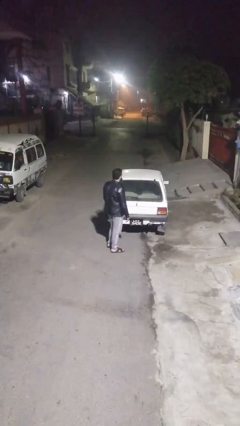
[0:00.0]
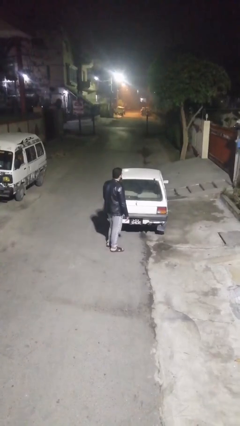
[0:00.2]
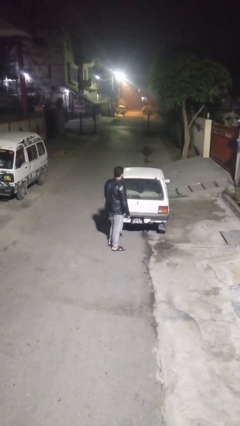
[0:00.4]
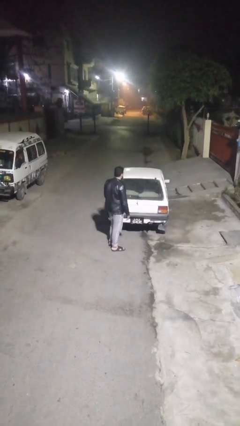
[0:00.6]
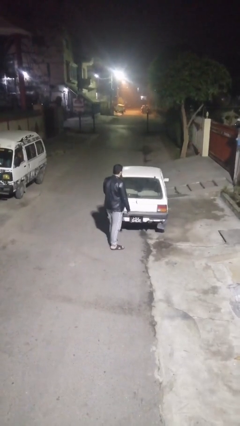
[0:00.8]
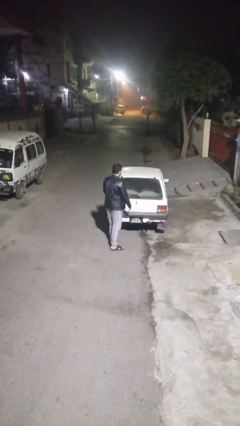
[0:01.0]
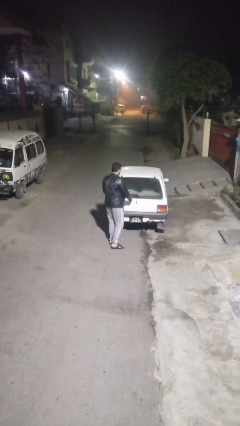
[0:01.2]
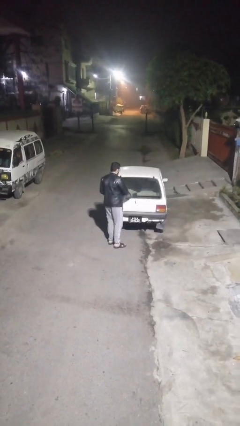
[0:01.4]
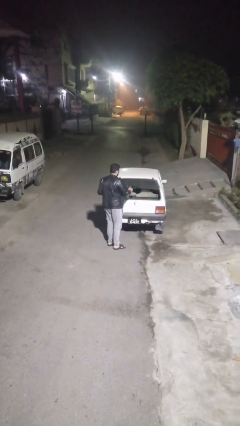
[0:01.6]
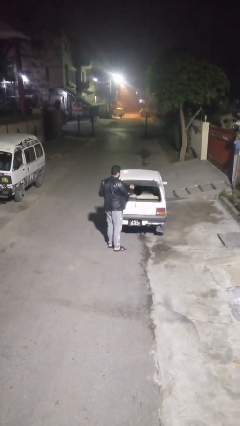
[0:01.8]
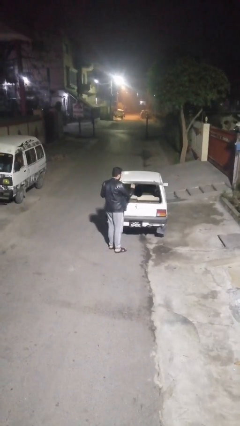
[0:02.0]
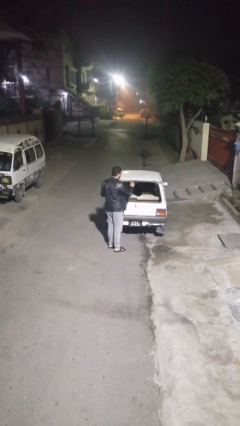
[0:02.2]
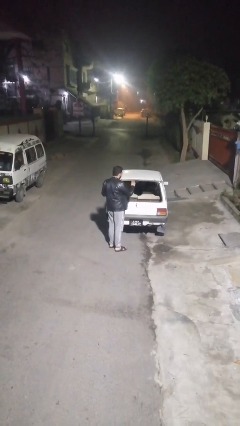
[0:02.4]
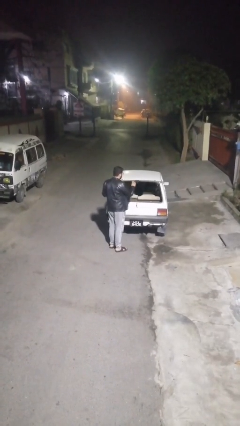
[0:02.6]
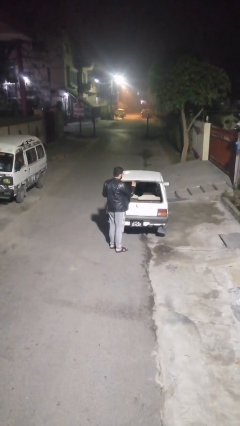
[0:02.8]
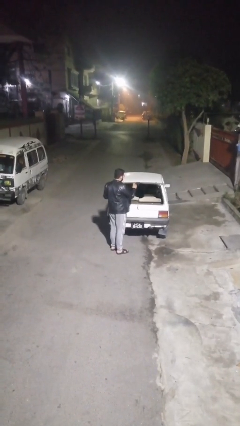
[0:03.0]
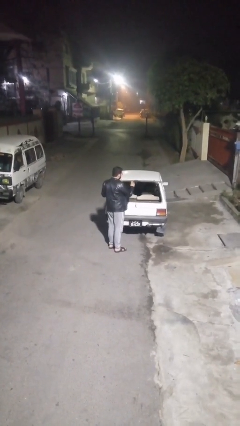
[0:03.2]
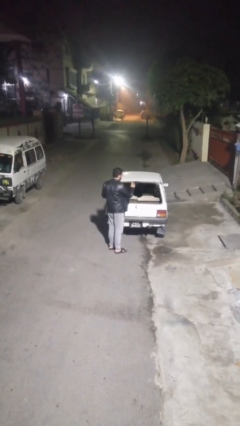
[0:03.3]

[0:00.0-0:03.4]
person opens car trunk

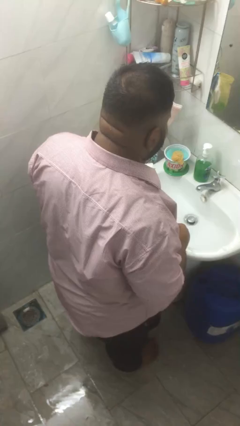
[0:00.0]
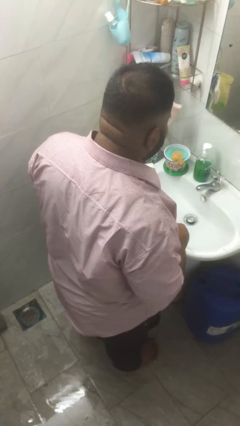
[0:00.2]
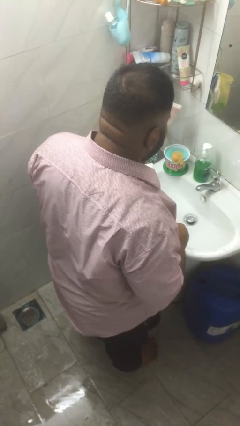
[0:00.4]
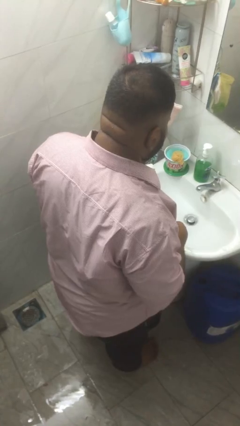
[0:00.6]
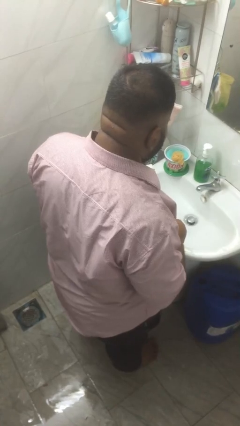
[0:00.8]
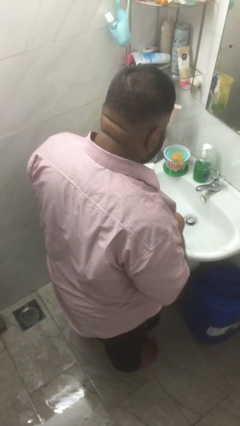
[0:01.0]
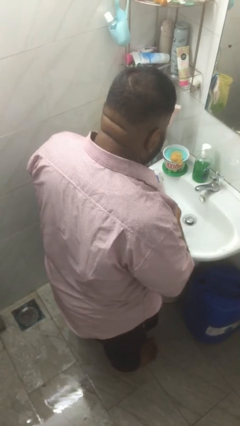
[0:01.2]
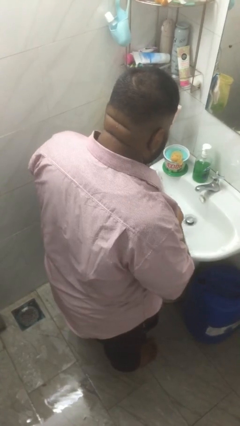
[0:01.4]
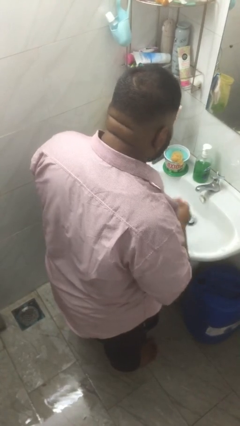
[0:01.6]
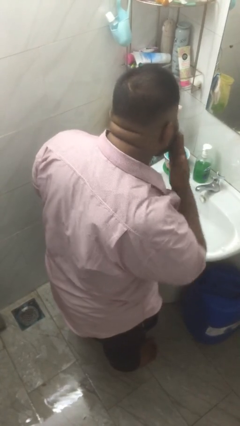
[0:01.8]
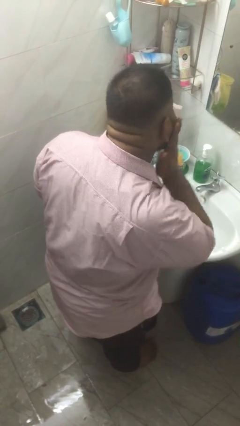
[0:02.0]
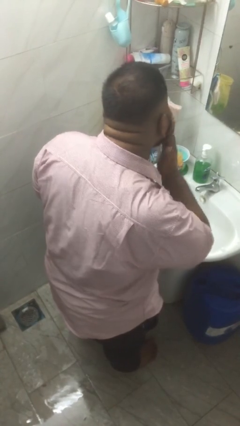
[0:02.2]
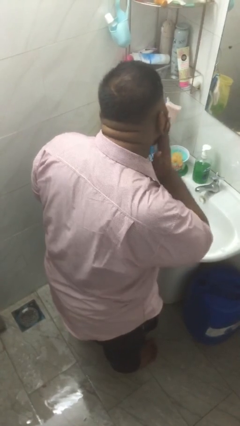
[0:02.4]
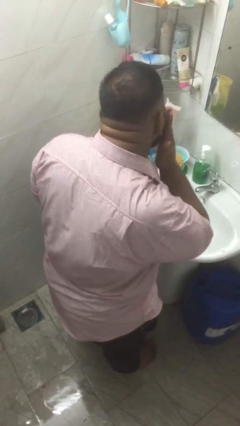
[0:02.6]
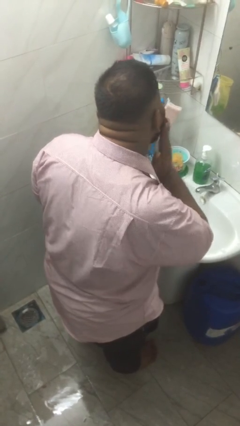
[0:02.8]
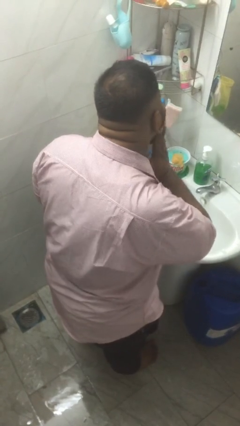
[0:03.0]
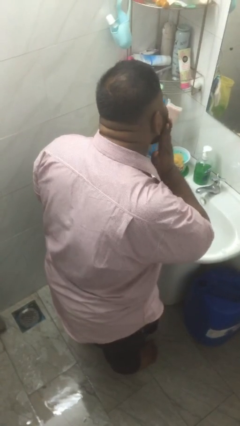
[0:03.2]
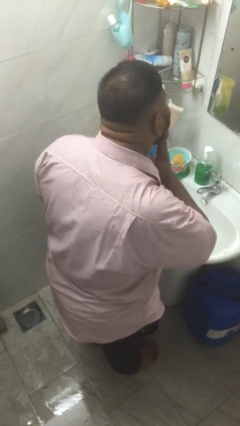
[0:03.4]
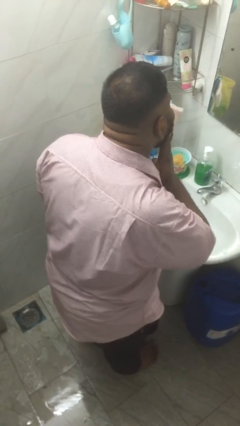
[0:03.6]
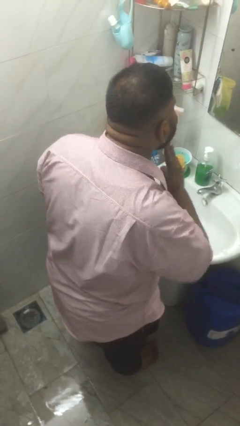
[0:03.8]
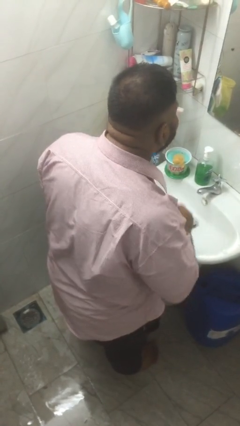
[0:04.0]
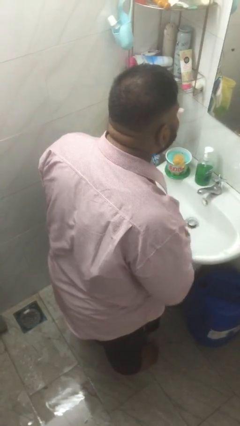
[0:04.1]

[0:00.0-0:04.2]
person applies shaving cream

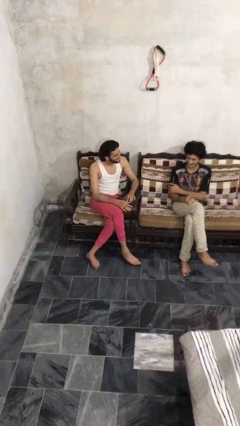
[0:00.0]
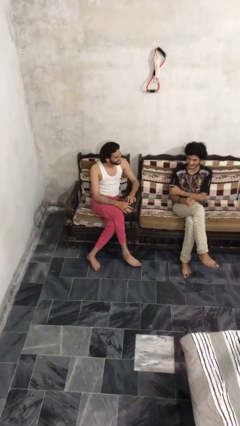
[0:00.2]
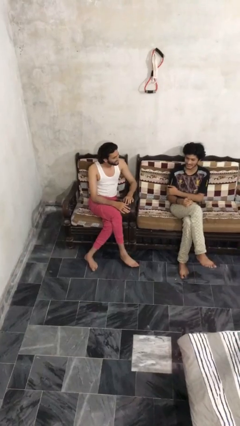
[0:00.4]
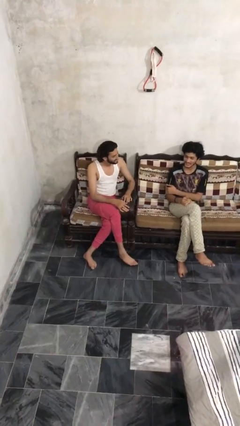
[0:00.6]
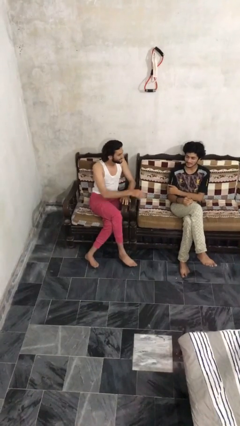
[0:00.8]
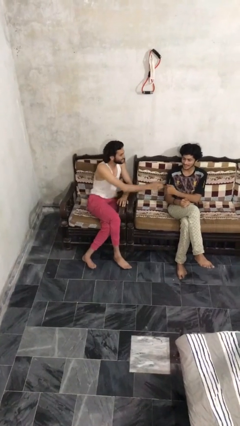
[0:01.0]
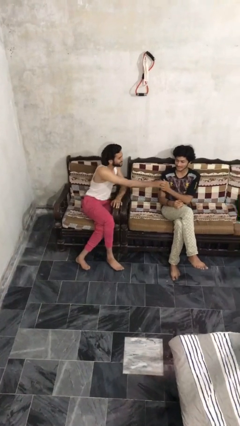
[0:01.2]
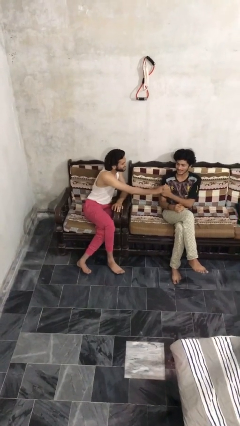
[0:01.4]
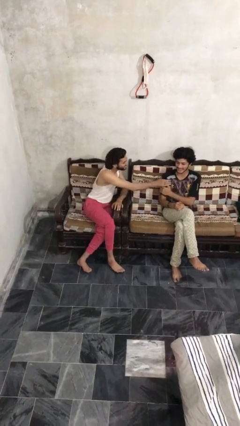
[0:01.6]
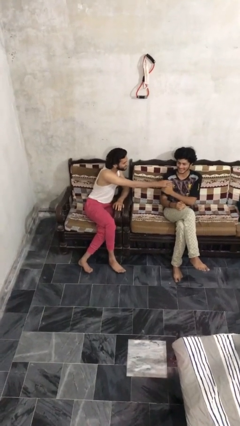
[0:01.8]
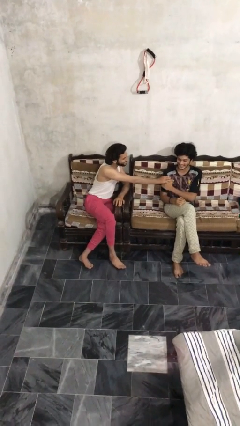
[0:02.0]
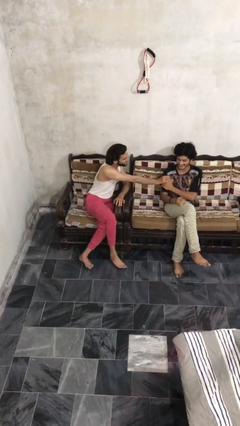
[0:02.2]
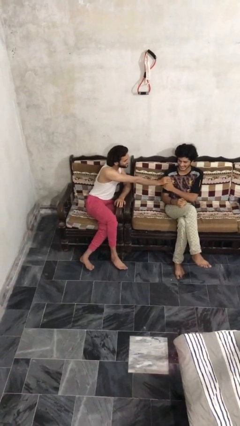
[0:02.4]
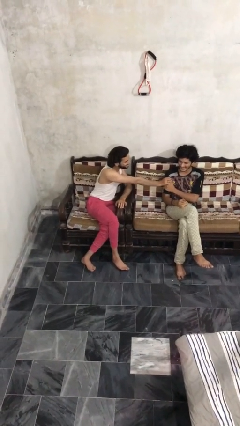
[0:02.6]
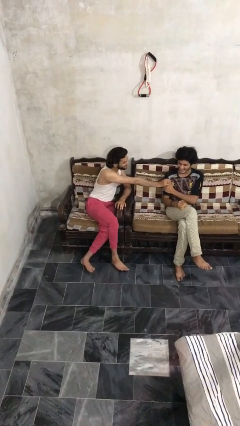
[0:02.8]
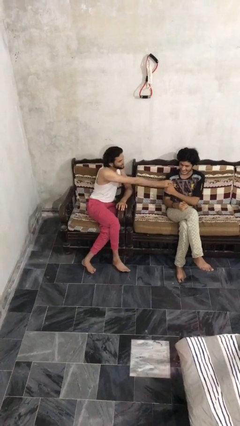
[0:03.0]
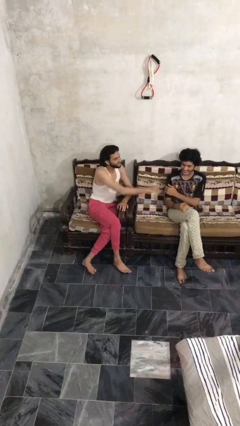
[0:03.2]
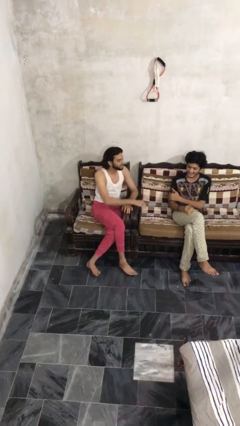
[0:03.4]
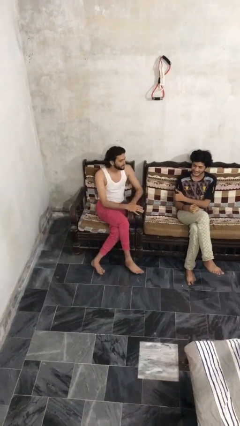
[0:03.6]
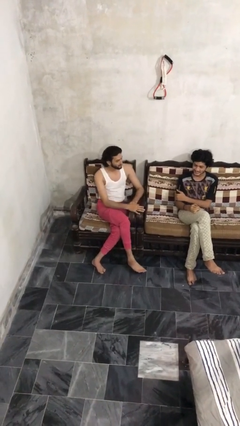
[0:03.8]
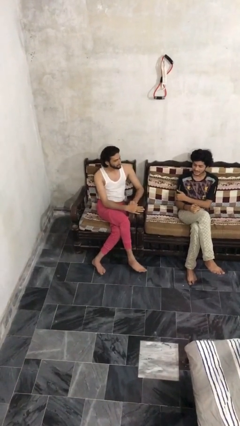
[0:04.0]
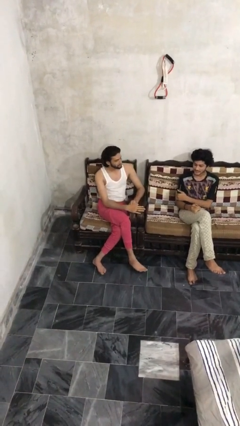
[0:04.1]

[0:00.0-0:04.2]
person grabs person by bicep

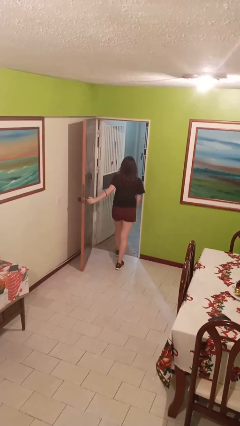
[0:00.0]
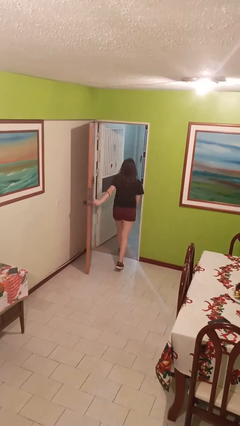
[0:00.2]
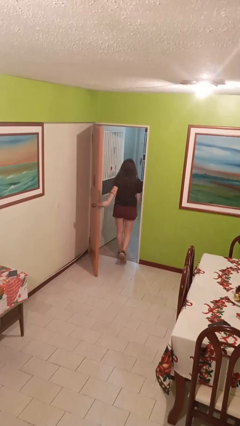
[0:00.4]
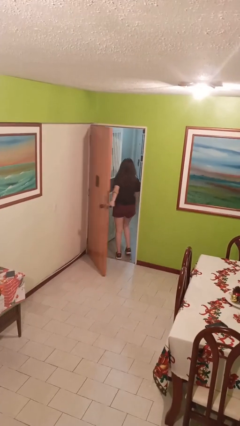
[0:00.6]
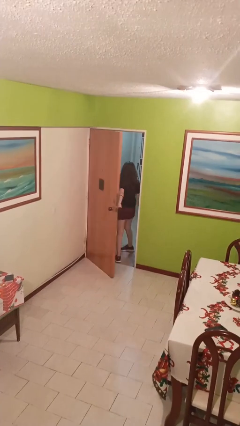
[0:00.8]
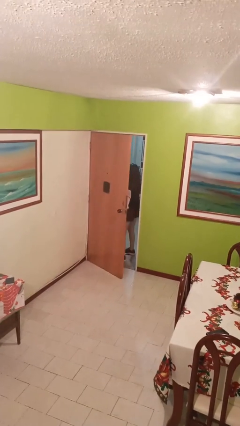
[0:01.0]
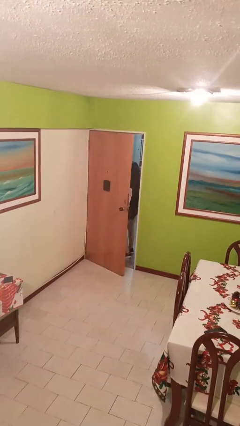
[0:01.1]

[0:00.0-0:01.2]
person closes facility door

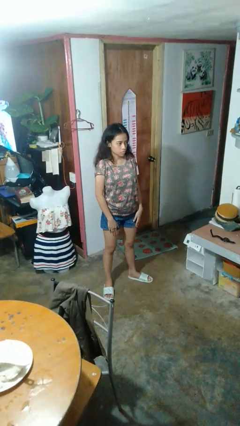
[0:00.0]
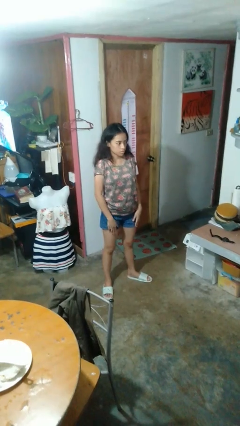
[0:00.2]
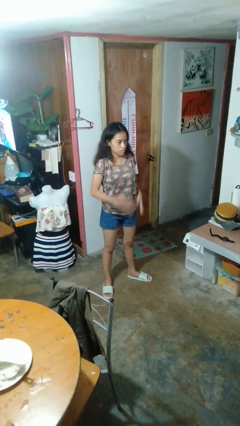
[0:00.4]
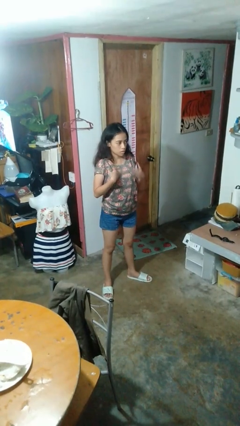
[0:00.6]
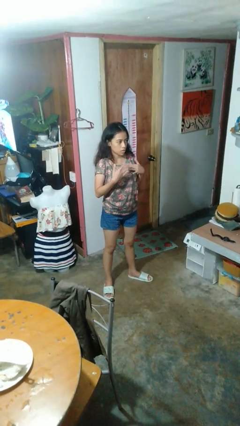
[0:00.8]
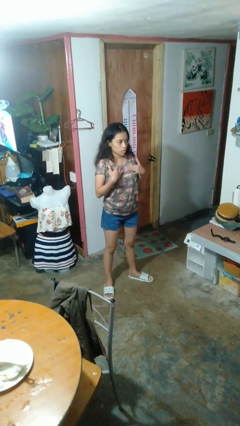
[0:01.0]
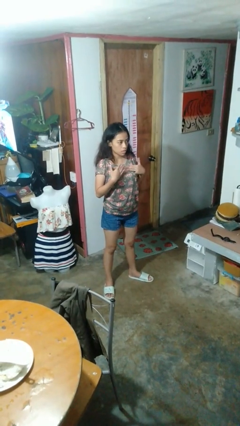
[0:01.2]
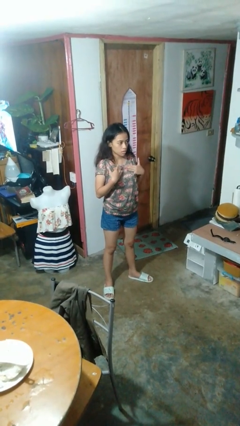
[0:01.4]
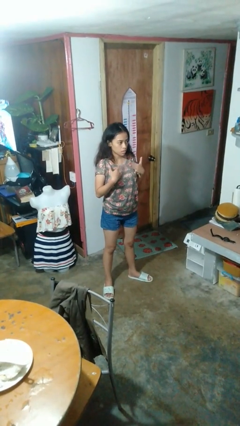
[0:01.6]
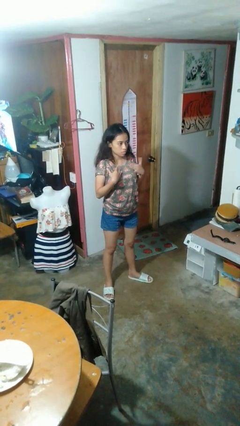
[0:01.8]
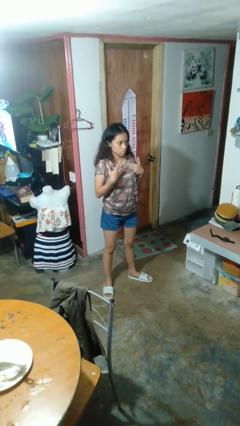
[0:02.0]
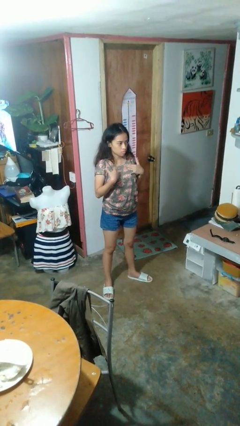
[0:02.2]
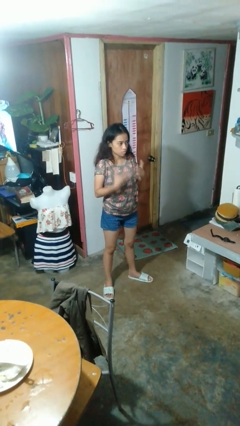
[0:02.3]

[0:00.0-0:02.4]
person drums on chest

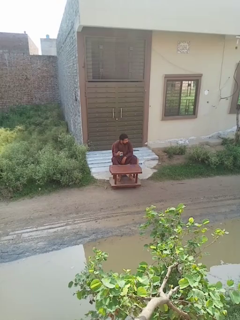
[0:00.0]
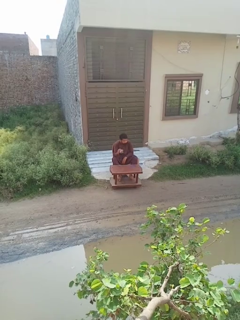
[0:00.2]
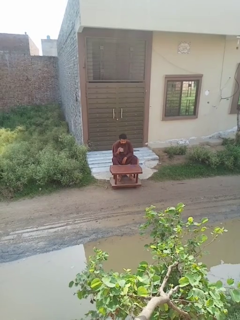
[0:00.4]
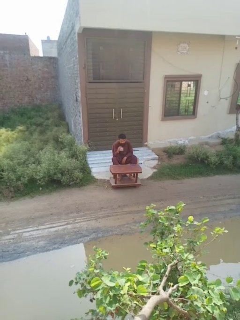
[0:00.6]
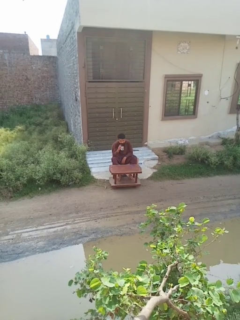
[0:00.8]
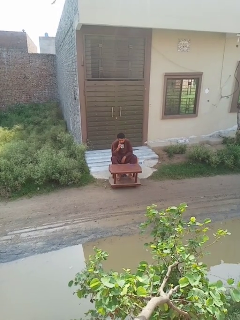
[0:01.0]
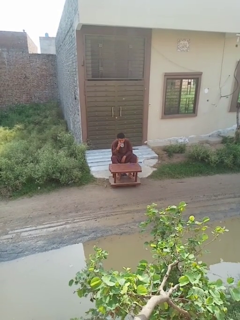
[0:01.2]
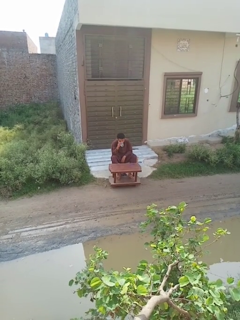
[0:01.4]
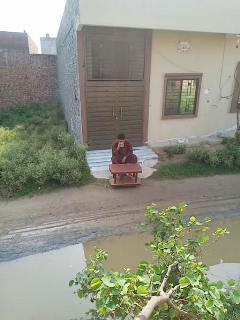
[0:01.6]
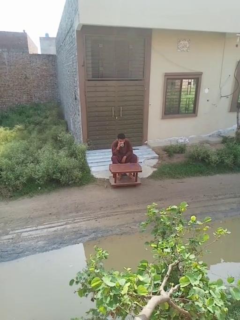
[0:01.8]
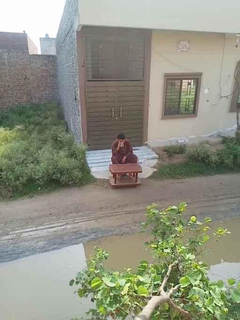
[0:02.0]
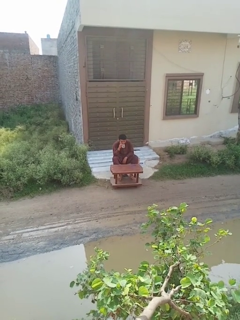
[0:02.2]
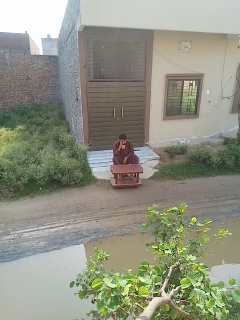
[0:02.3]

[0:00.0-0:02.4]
person drinks from mug
